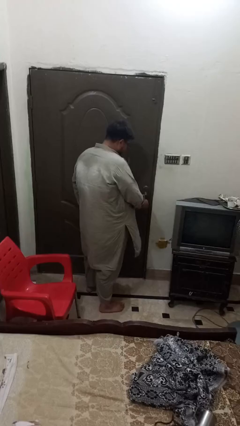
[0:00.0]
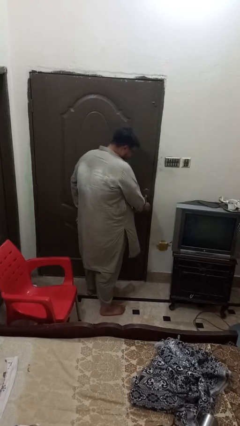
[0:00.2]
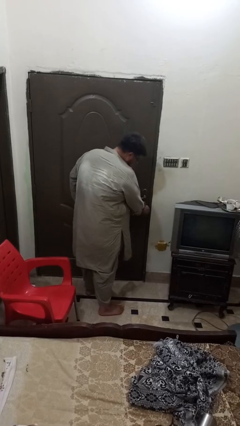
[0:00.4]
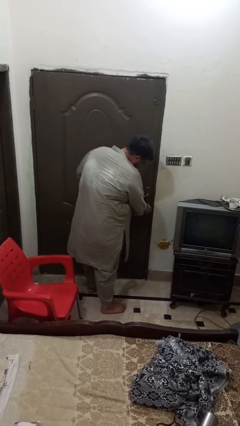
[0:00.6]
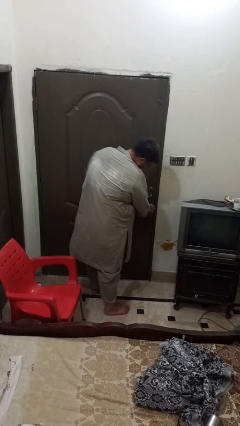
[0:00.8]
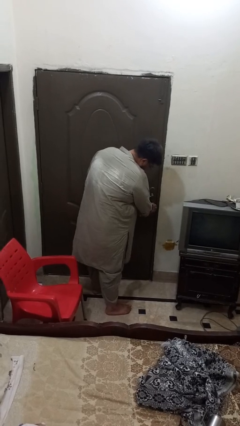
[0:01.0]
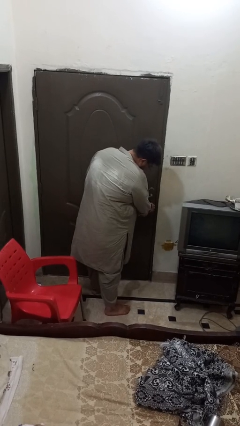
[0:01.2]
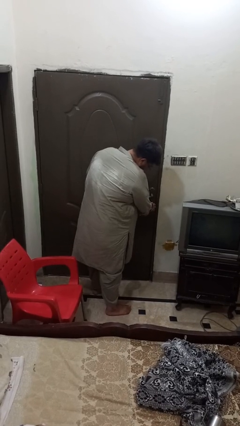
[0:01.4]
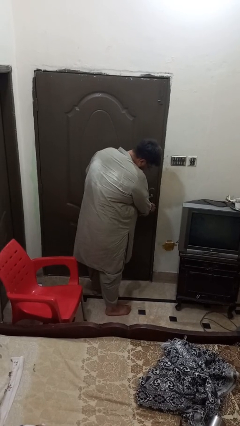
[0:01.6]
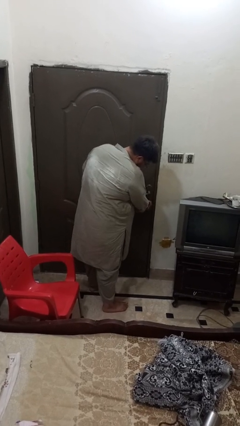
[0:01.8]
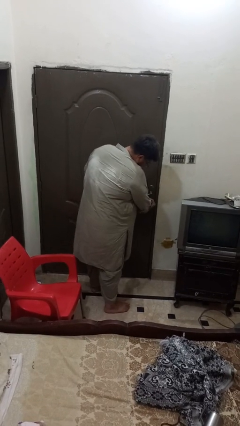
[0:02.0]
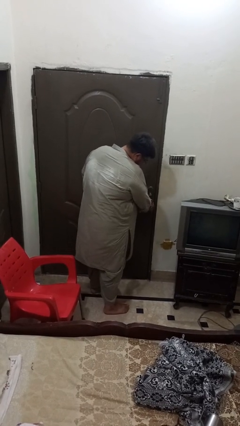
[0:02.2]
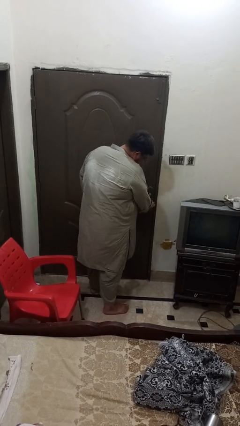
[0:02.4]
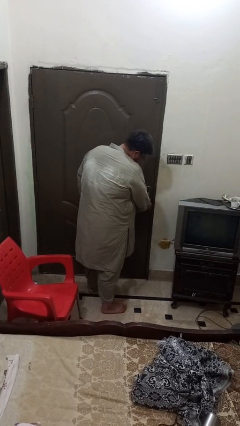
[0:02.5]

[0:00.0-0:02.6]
person unlocks door with keys

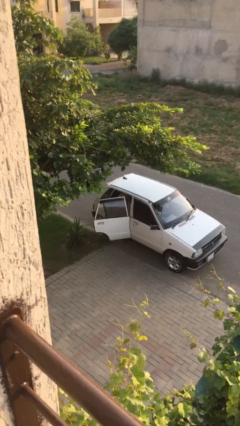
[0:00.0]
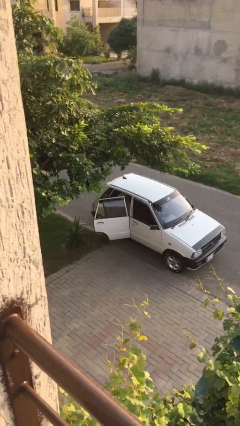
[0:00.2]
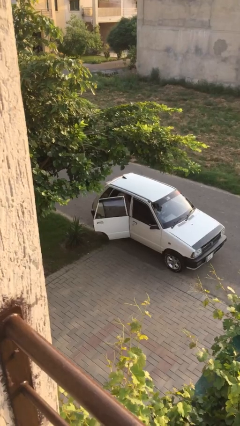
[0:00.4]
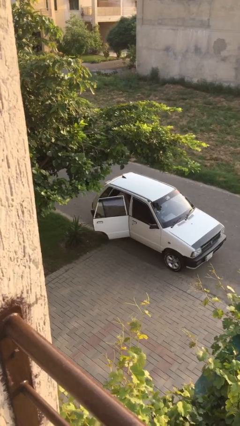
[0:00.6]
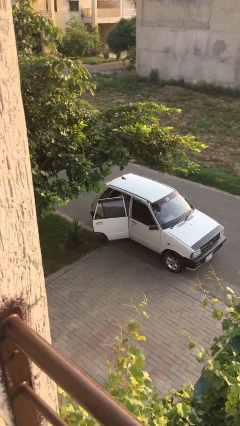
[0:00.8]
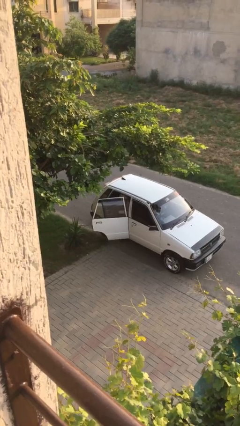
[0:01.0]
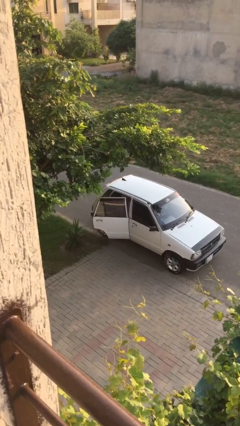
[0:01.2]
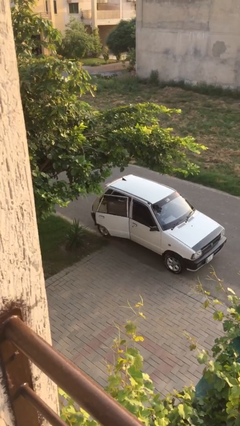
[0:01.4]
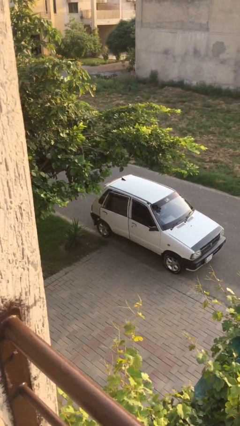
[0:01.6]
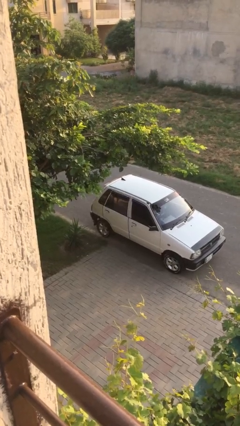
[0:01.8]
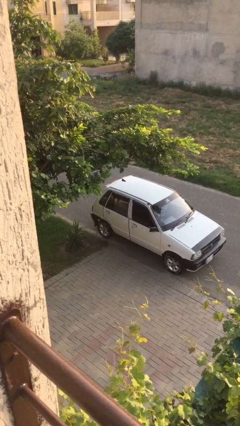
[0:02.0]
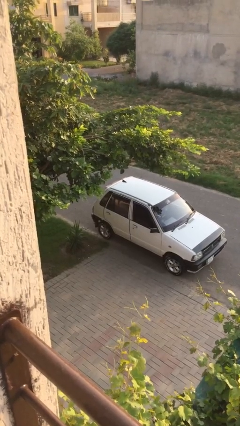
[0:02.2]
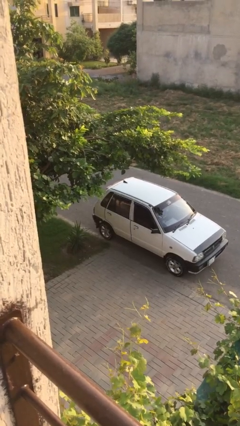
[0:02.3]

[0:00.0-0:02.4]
person closes car door

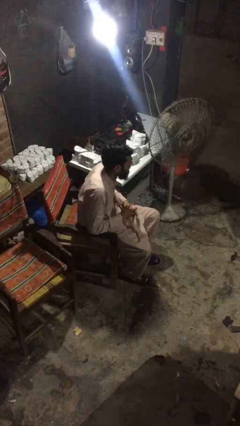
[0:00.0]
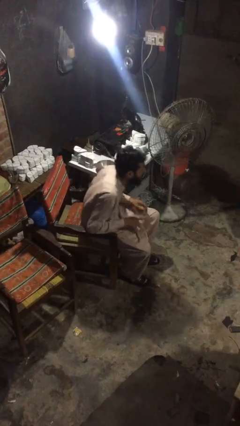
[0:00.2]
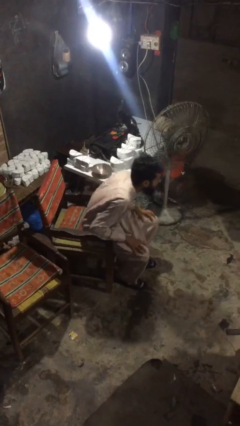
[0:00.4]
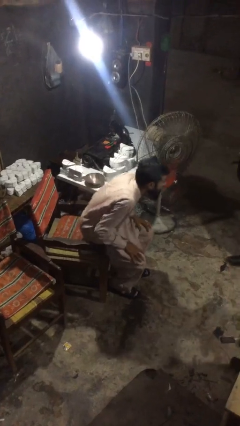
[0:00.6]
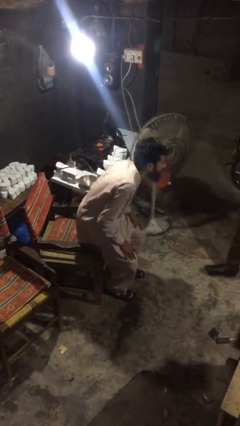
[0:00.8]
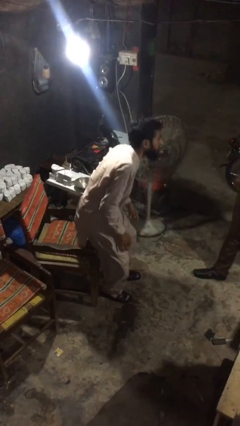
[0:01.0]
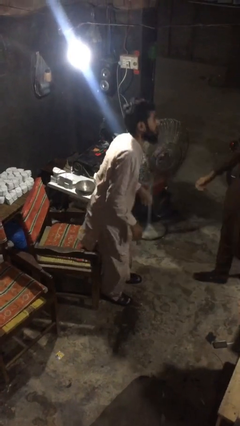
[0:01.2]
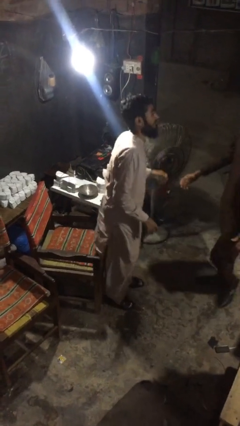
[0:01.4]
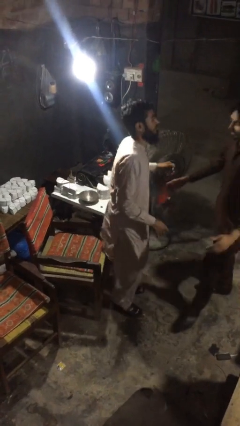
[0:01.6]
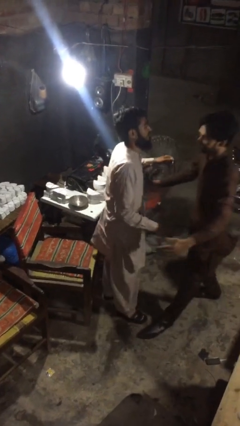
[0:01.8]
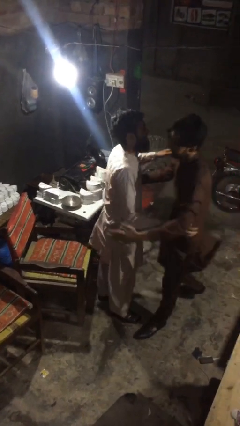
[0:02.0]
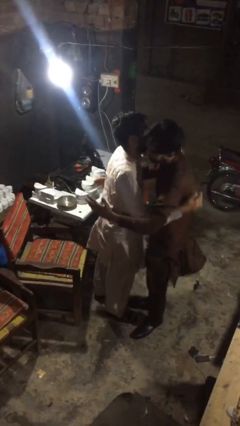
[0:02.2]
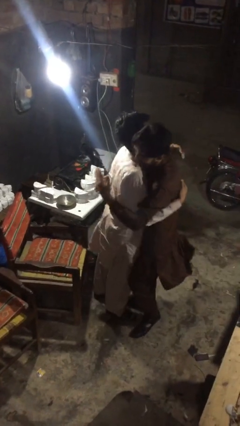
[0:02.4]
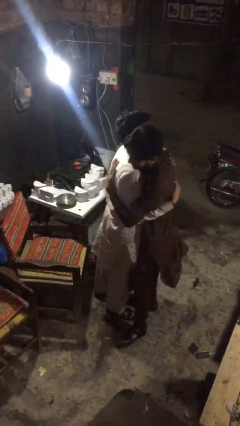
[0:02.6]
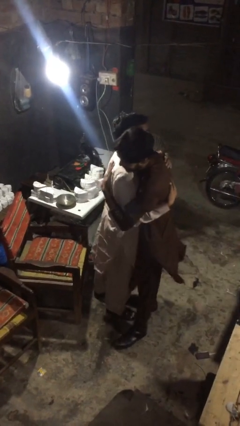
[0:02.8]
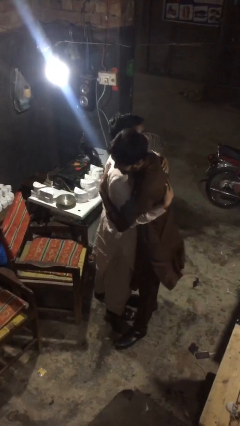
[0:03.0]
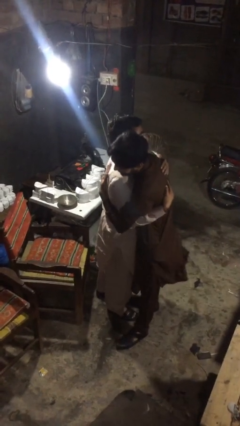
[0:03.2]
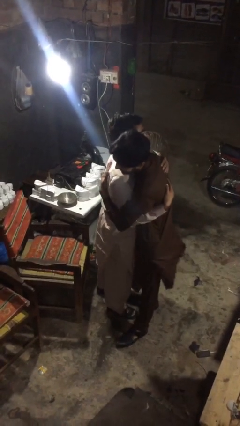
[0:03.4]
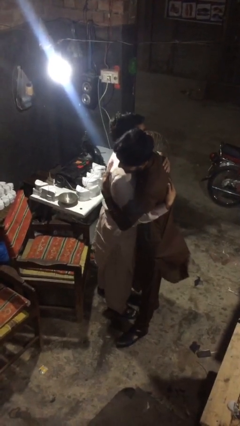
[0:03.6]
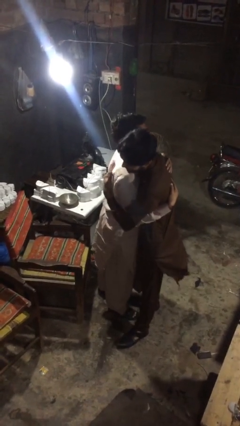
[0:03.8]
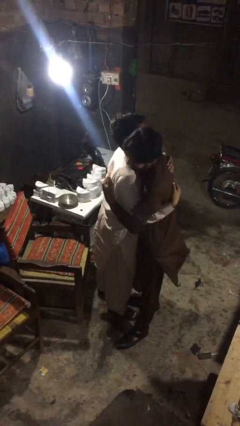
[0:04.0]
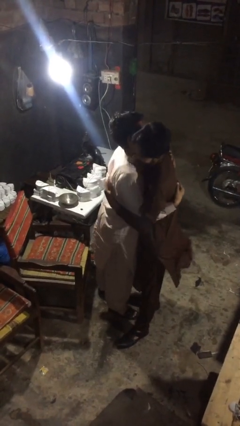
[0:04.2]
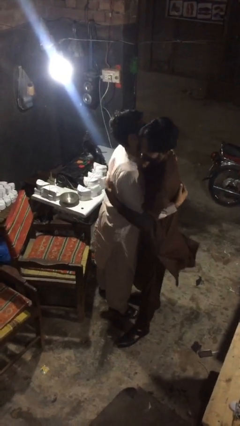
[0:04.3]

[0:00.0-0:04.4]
person embraces person

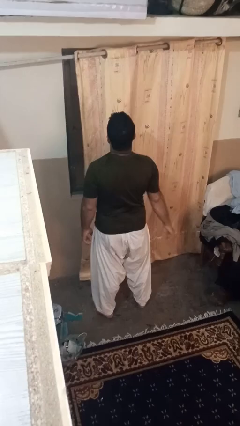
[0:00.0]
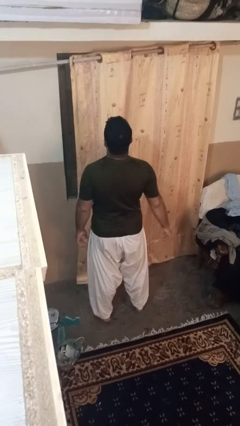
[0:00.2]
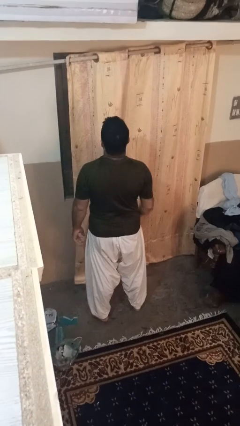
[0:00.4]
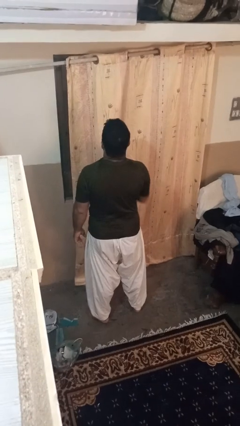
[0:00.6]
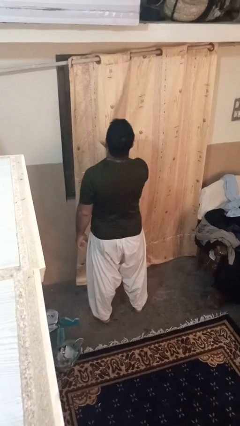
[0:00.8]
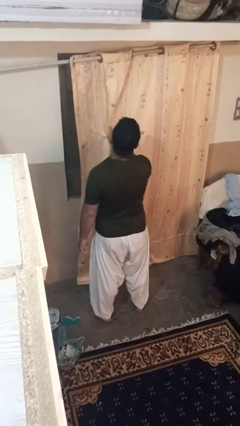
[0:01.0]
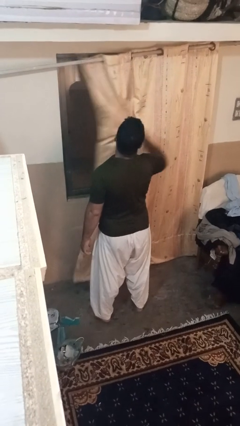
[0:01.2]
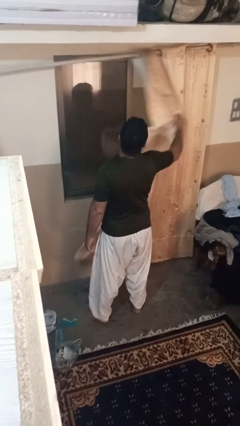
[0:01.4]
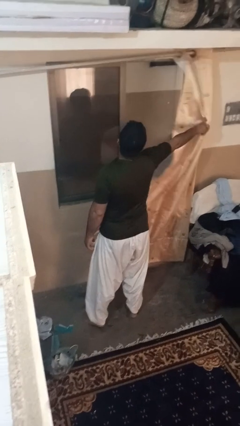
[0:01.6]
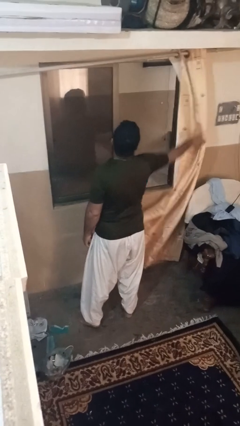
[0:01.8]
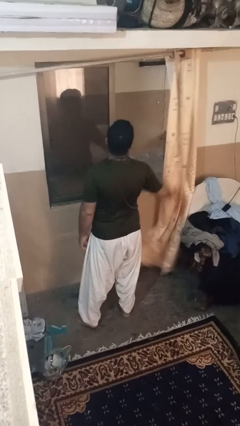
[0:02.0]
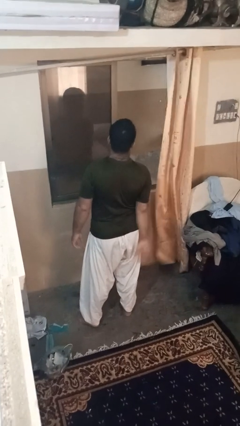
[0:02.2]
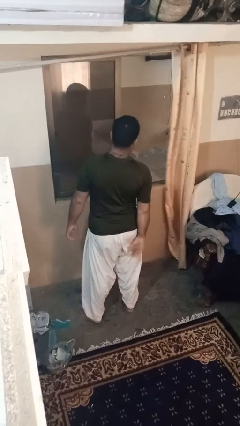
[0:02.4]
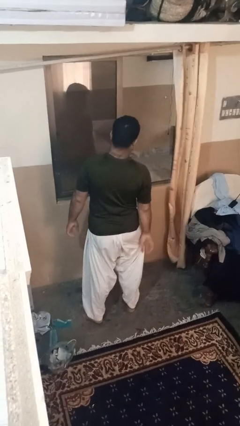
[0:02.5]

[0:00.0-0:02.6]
person opens curtains

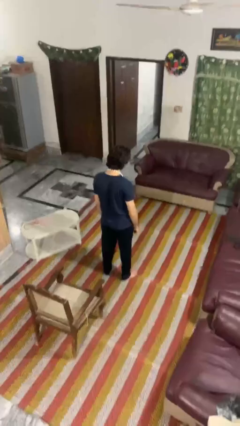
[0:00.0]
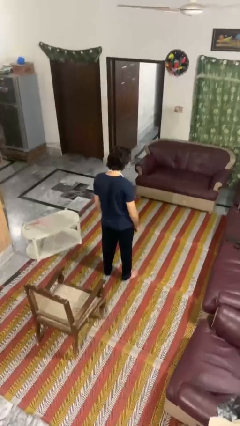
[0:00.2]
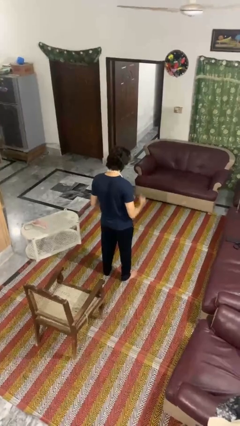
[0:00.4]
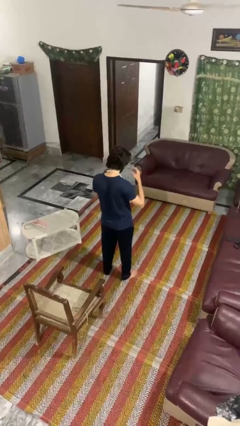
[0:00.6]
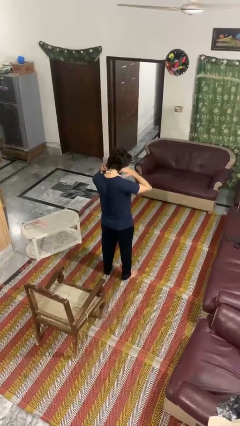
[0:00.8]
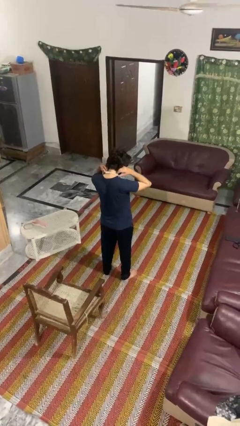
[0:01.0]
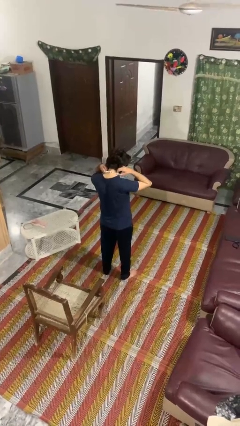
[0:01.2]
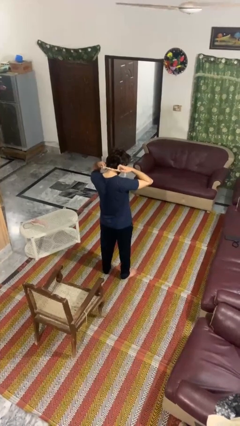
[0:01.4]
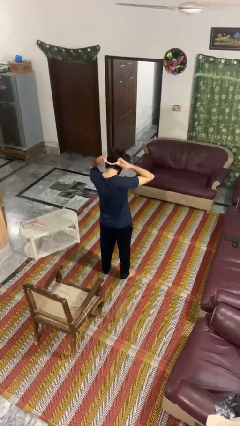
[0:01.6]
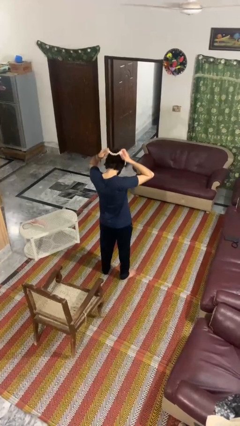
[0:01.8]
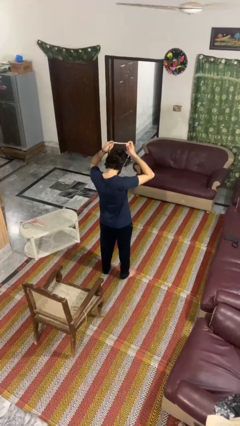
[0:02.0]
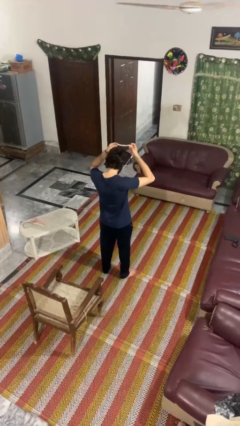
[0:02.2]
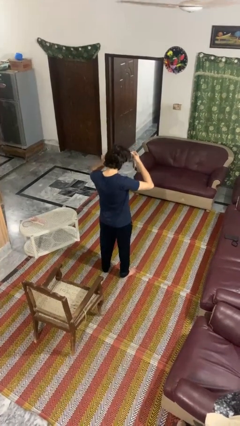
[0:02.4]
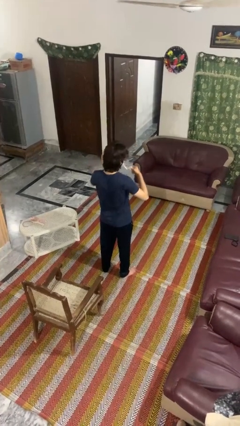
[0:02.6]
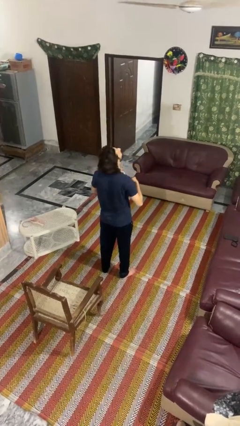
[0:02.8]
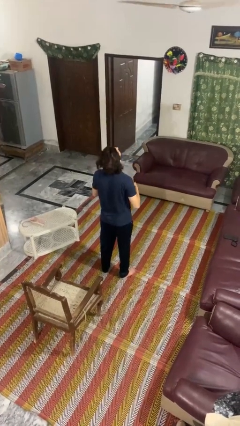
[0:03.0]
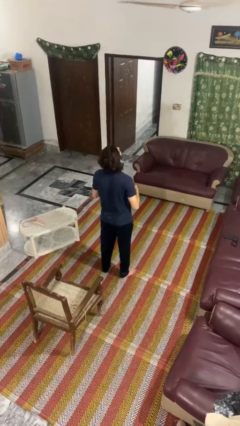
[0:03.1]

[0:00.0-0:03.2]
person takes off necklace

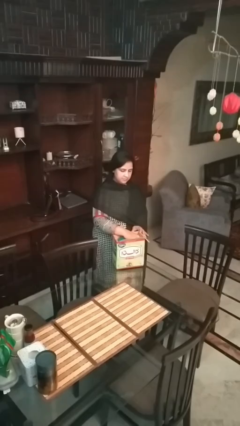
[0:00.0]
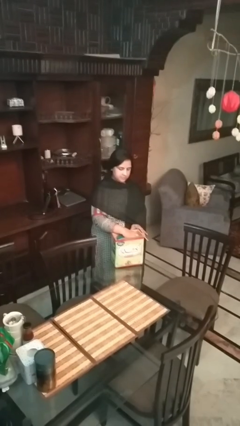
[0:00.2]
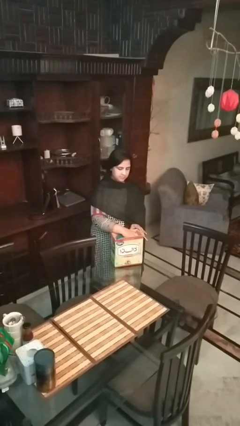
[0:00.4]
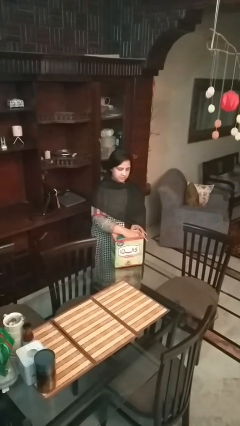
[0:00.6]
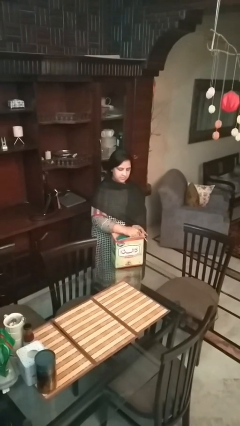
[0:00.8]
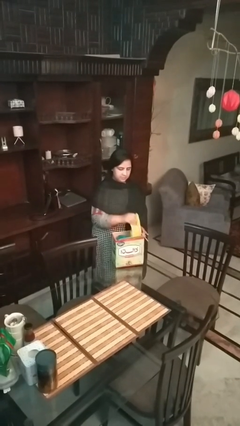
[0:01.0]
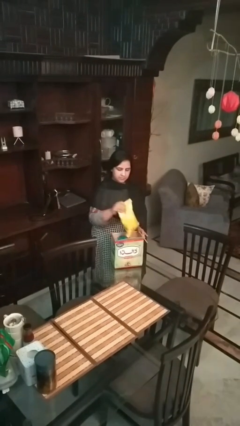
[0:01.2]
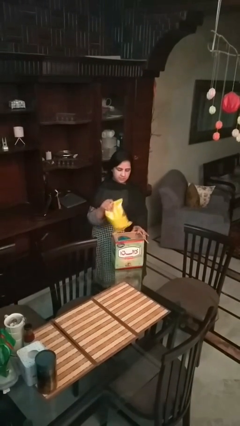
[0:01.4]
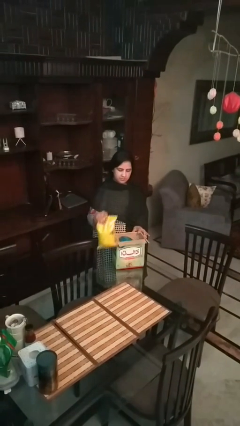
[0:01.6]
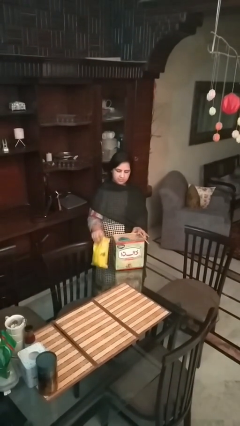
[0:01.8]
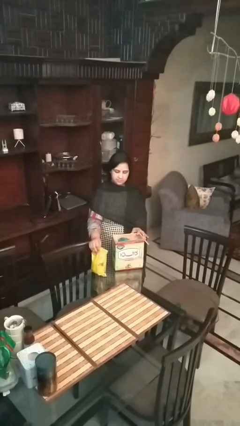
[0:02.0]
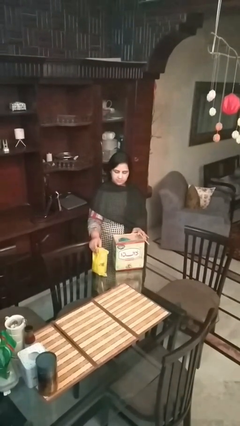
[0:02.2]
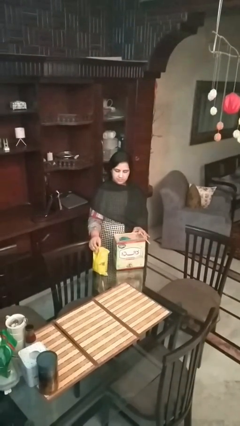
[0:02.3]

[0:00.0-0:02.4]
person takes object from box
